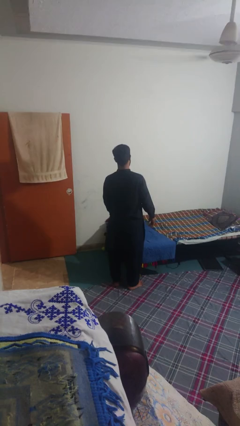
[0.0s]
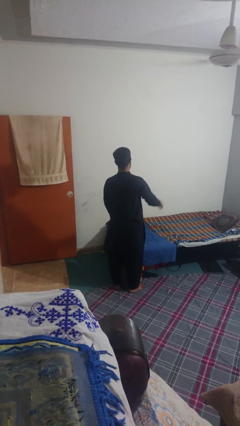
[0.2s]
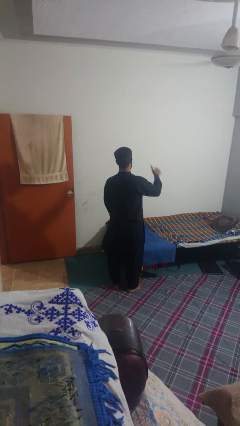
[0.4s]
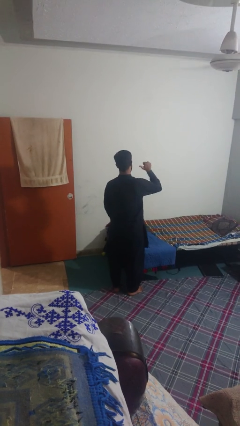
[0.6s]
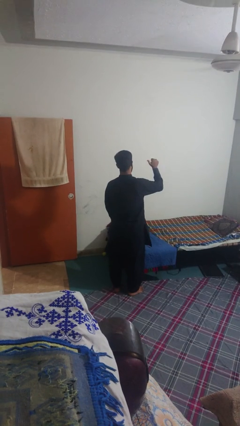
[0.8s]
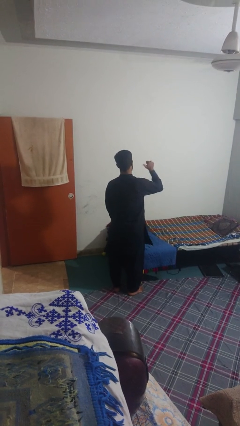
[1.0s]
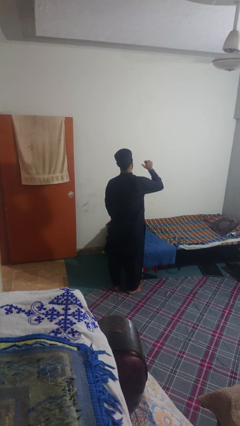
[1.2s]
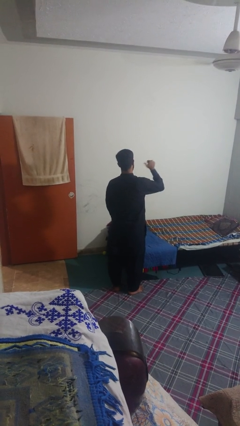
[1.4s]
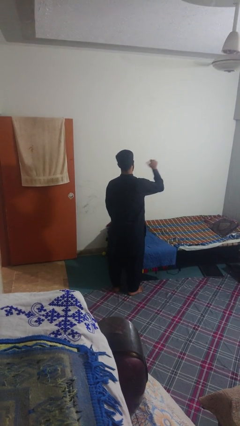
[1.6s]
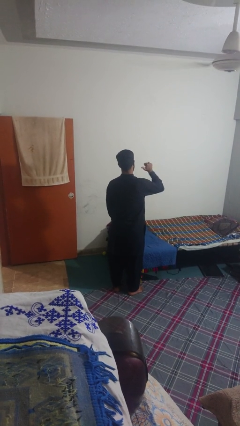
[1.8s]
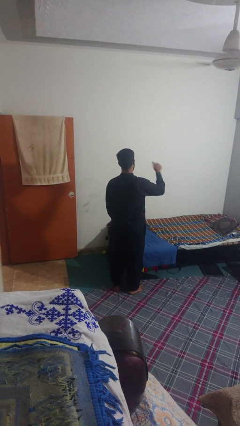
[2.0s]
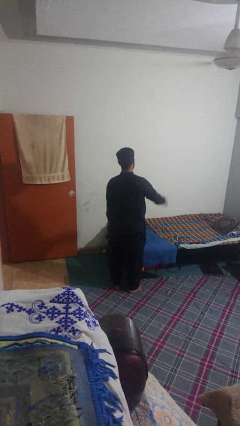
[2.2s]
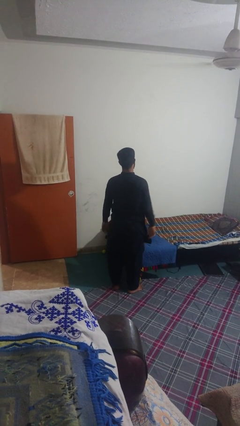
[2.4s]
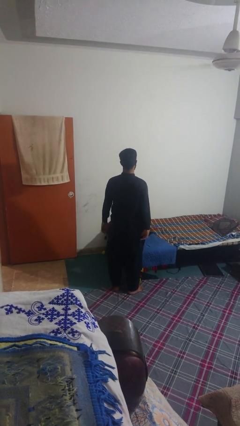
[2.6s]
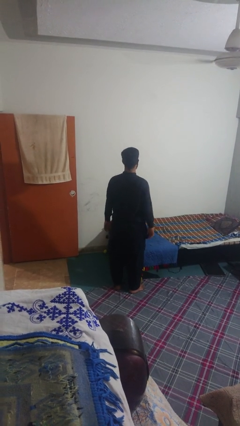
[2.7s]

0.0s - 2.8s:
person gestures behind me

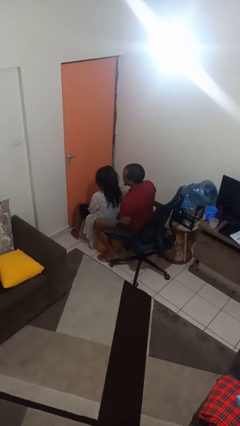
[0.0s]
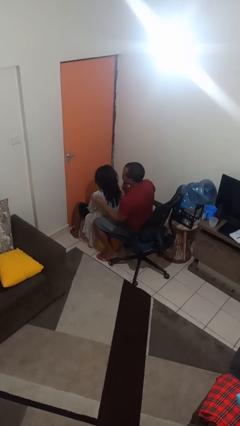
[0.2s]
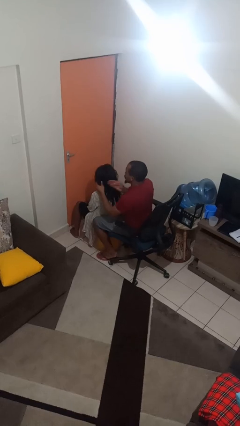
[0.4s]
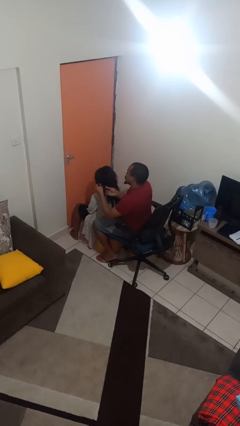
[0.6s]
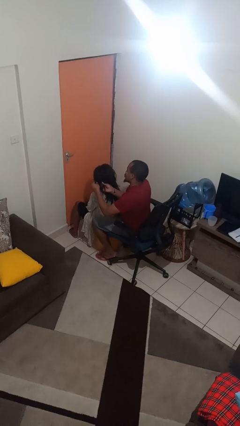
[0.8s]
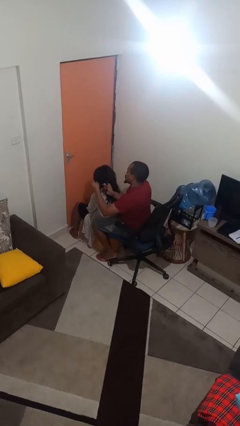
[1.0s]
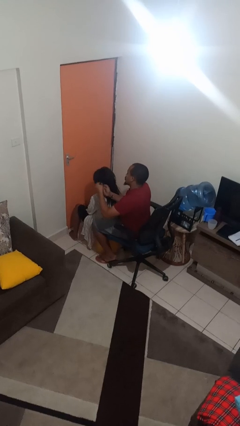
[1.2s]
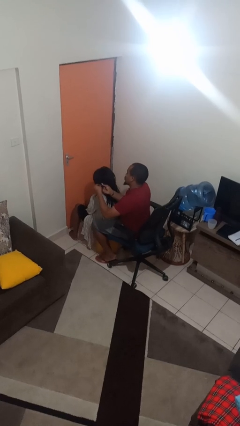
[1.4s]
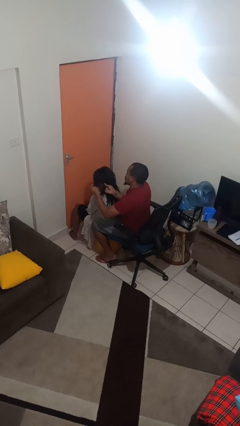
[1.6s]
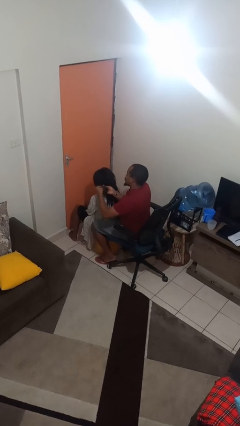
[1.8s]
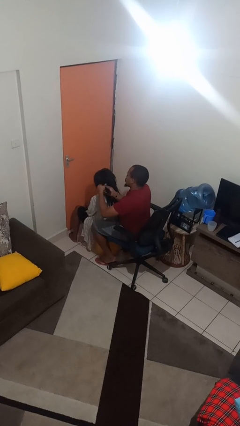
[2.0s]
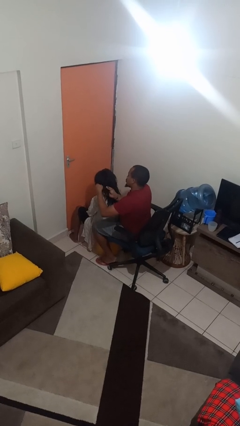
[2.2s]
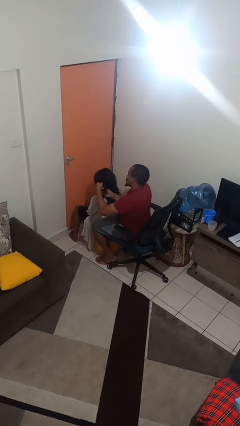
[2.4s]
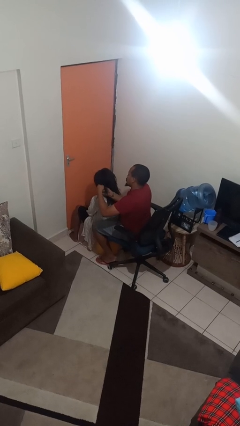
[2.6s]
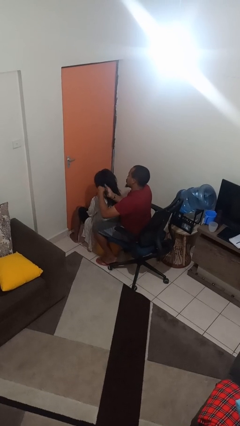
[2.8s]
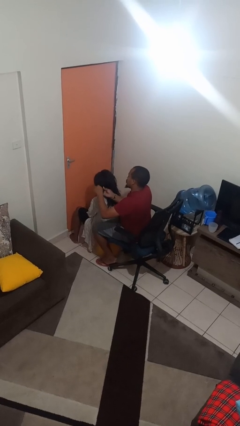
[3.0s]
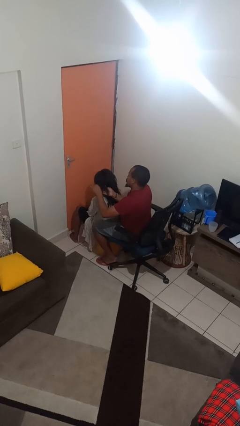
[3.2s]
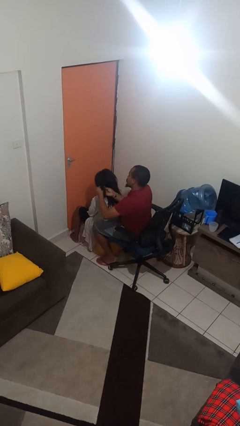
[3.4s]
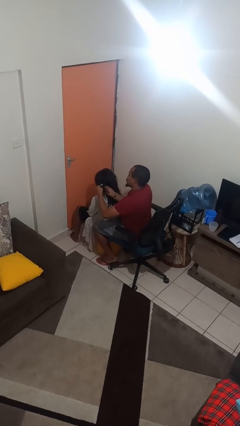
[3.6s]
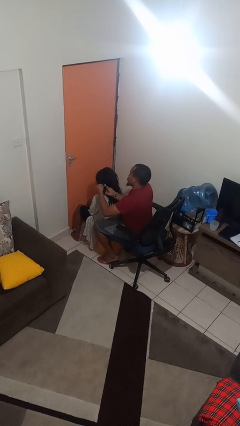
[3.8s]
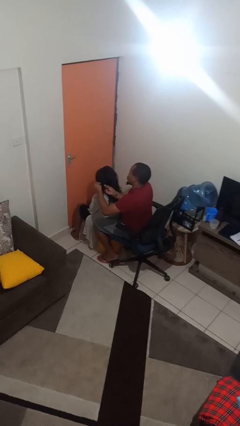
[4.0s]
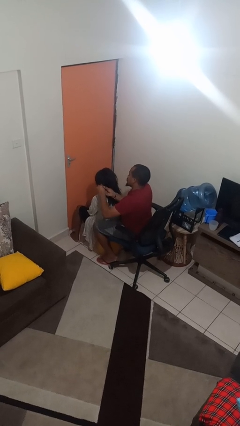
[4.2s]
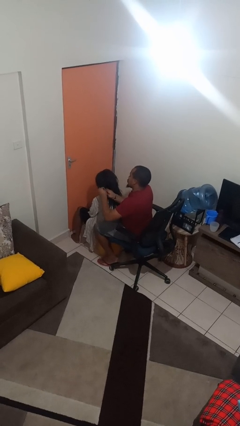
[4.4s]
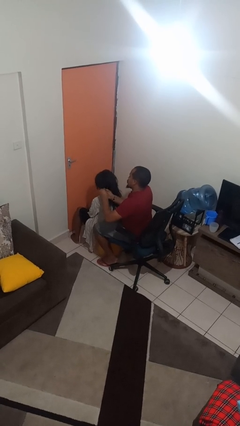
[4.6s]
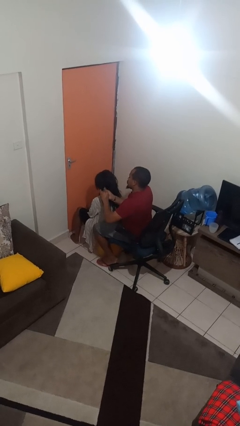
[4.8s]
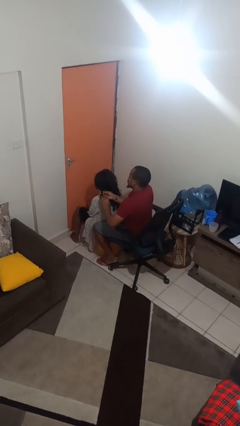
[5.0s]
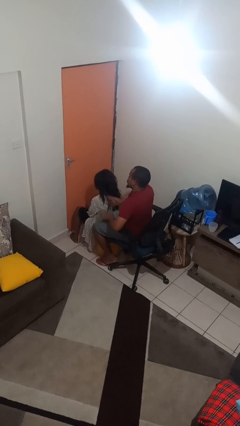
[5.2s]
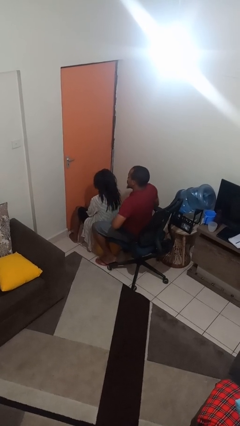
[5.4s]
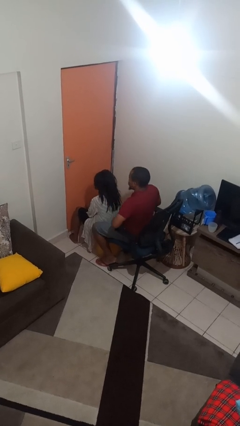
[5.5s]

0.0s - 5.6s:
person braids hair of person

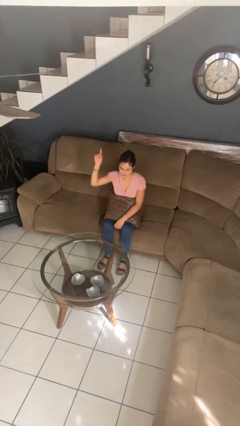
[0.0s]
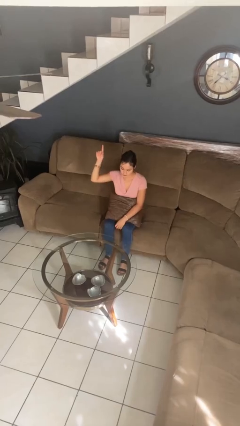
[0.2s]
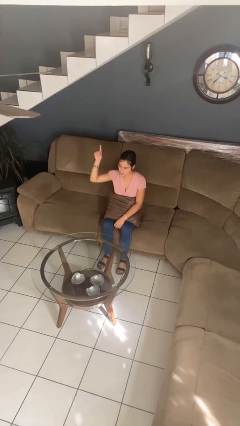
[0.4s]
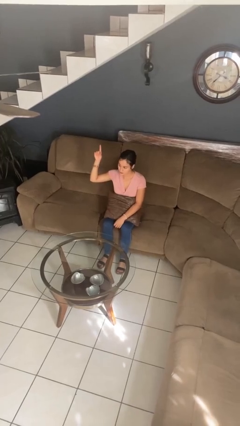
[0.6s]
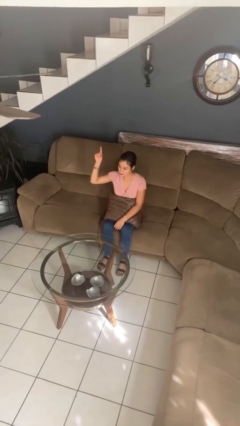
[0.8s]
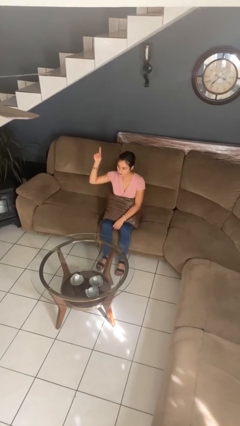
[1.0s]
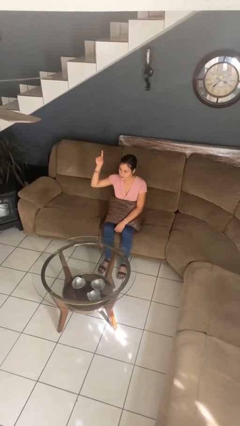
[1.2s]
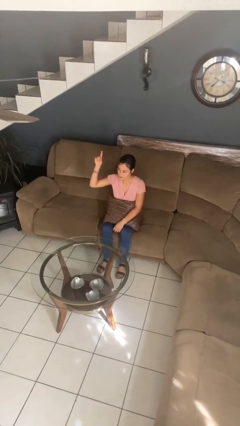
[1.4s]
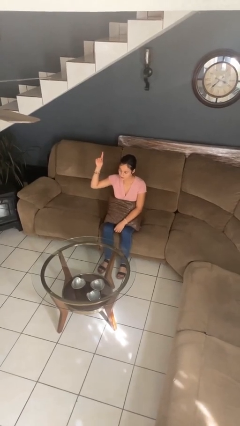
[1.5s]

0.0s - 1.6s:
person gestures number one

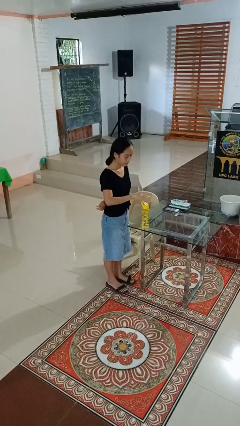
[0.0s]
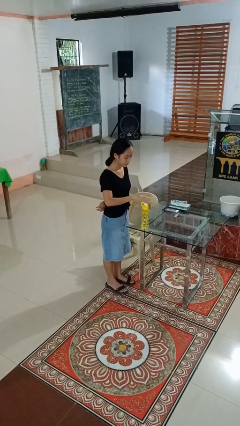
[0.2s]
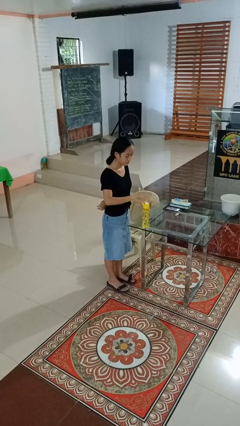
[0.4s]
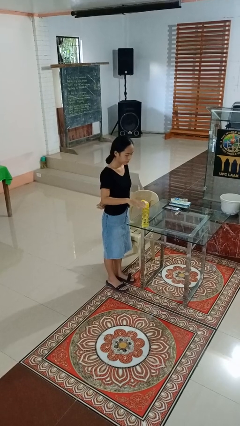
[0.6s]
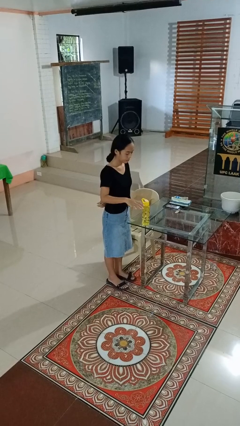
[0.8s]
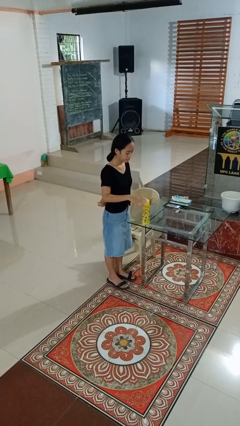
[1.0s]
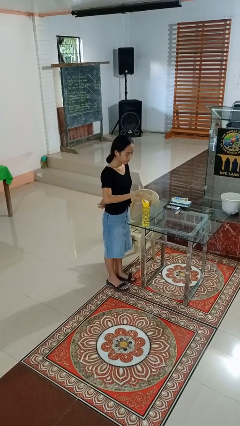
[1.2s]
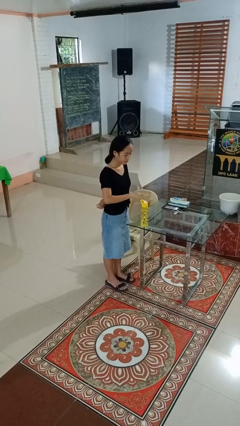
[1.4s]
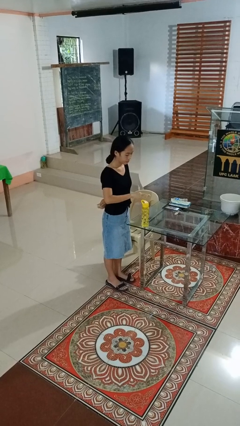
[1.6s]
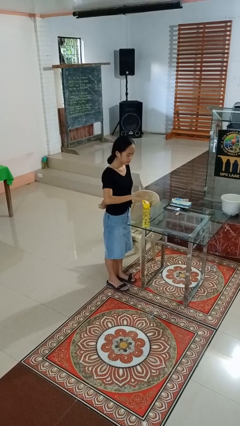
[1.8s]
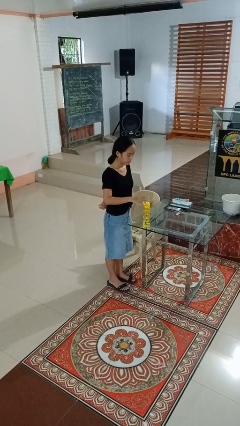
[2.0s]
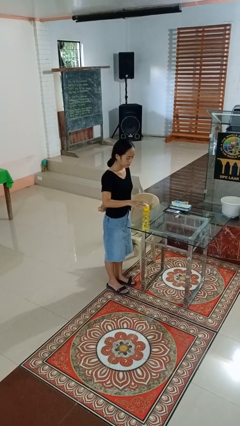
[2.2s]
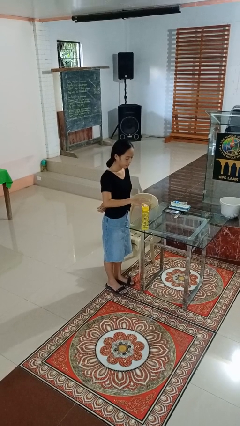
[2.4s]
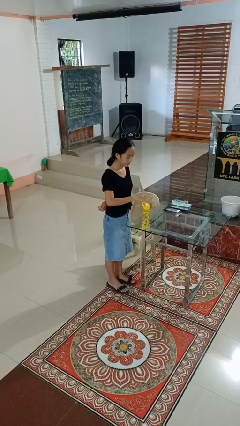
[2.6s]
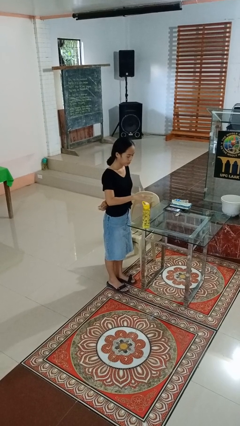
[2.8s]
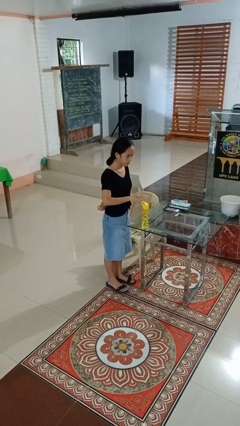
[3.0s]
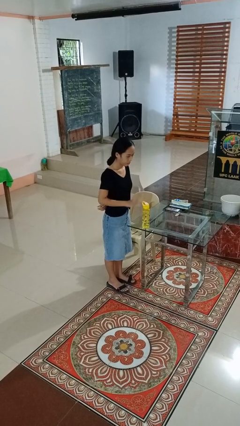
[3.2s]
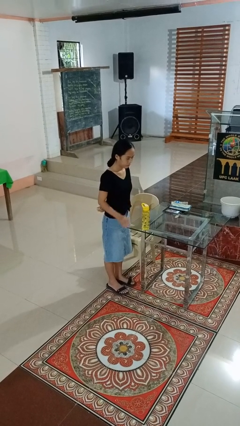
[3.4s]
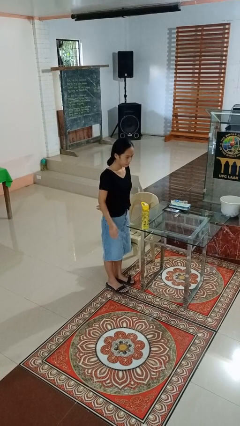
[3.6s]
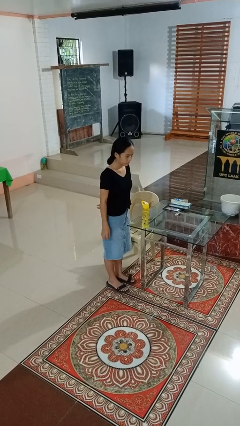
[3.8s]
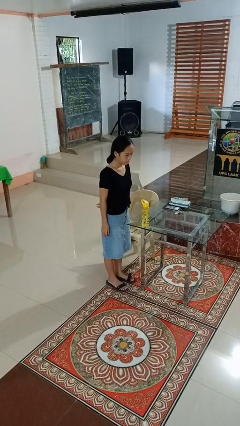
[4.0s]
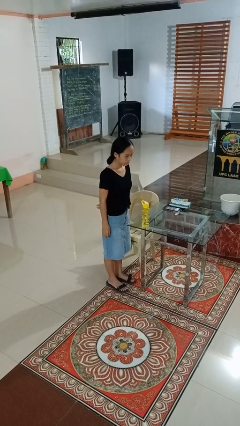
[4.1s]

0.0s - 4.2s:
person waves hand over object

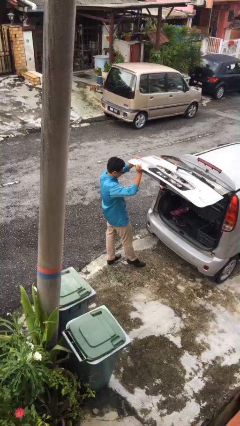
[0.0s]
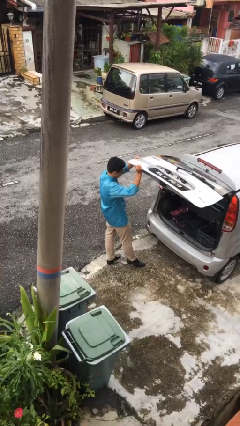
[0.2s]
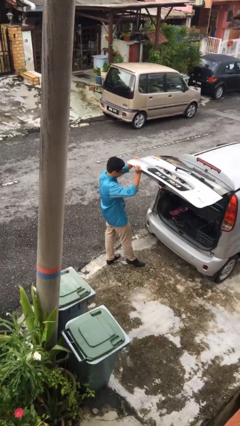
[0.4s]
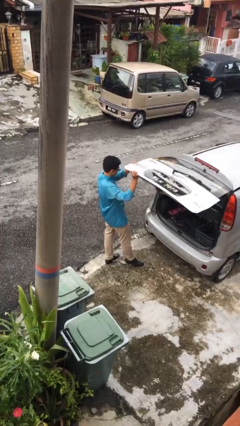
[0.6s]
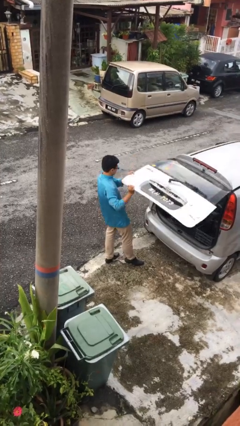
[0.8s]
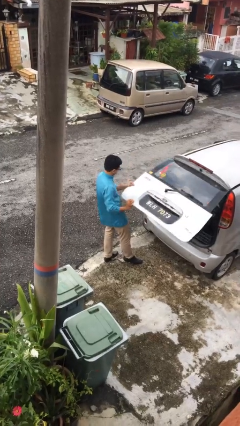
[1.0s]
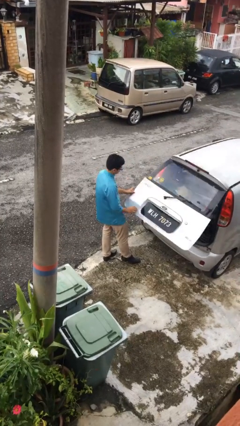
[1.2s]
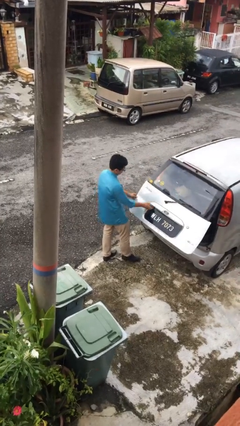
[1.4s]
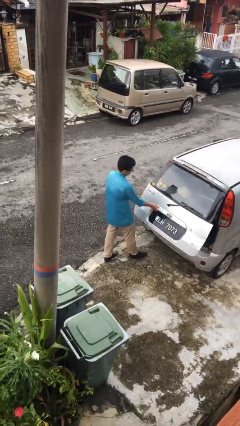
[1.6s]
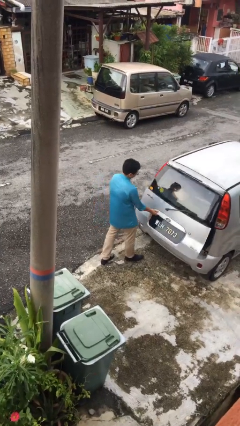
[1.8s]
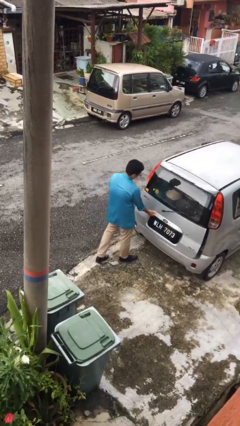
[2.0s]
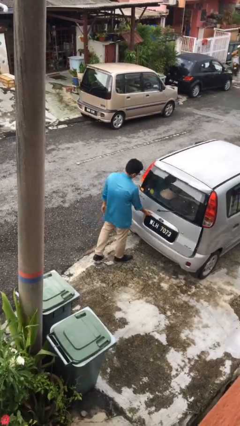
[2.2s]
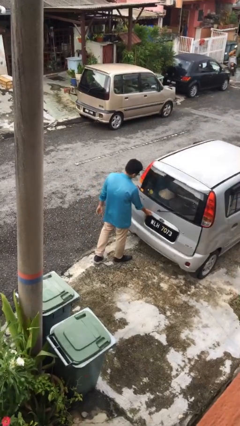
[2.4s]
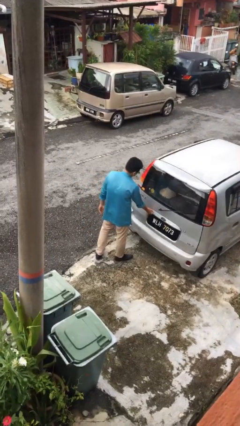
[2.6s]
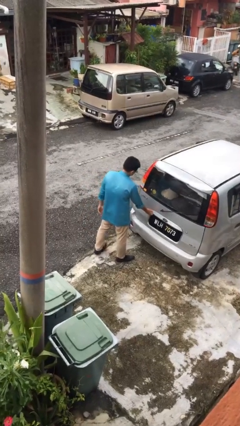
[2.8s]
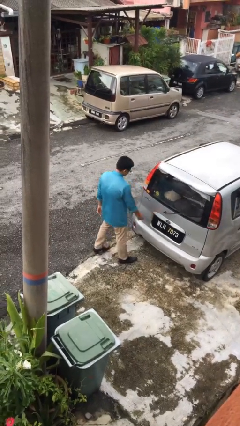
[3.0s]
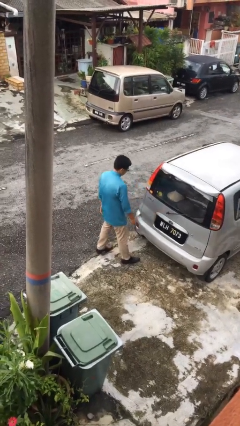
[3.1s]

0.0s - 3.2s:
person closes car trunk
